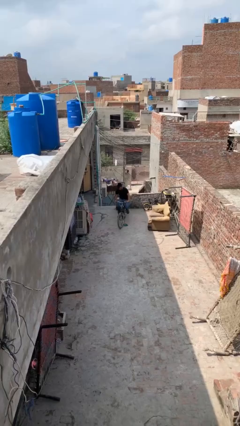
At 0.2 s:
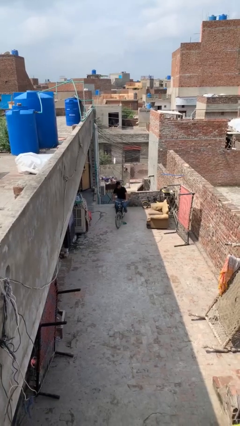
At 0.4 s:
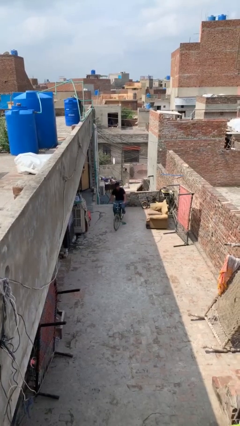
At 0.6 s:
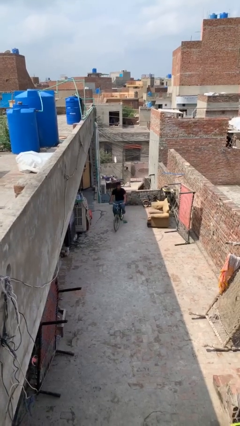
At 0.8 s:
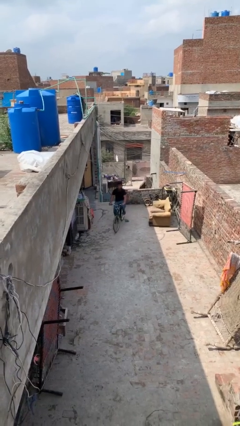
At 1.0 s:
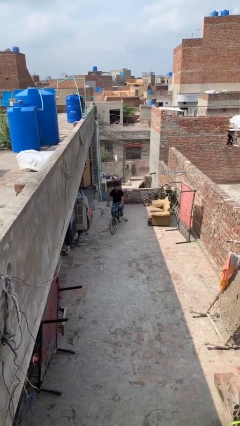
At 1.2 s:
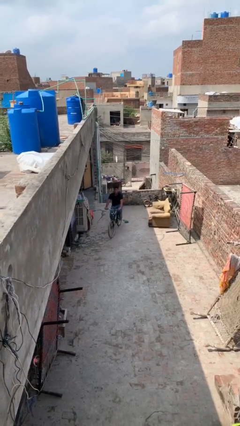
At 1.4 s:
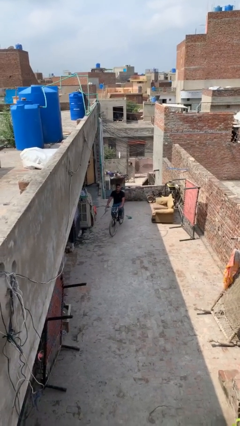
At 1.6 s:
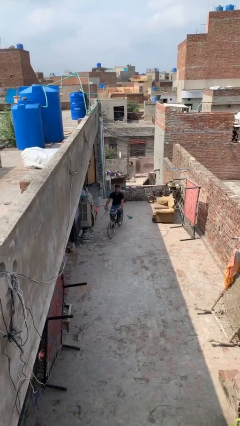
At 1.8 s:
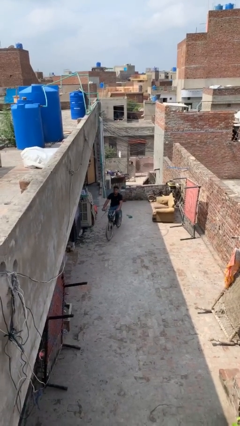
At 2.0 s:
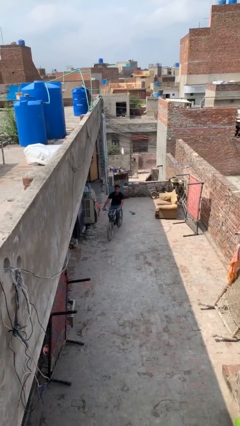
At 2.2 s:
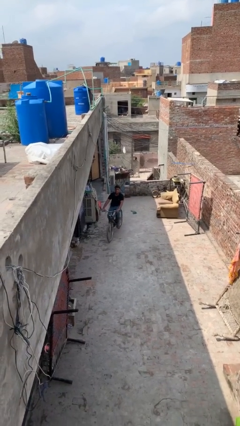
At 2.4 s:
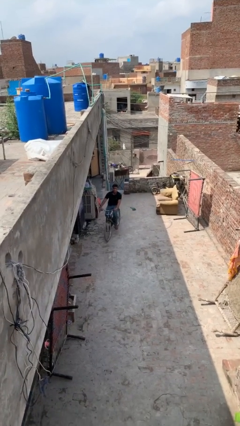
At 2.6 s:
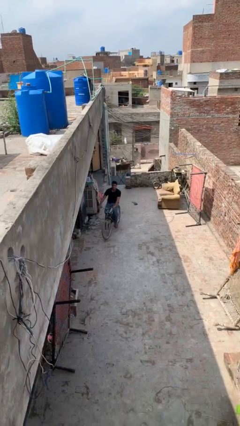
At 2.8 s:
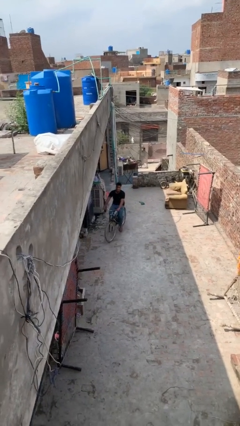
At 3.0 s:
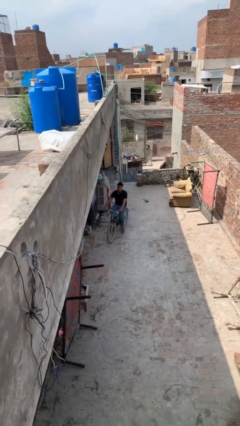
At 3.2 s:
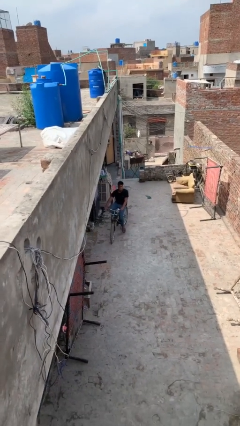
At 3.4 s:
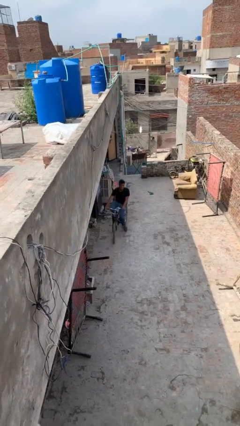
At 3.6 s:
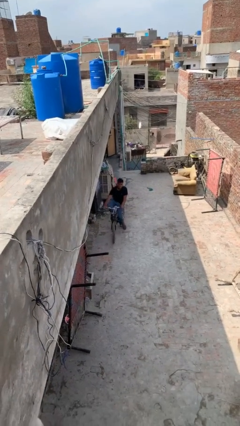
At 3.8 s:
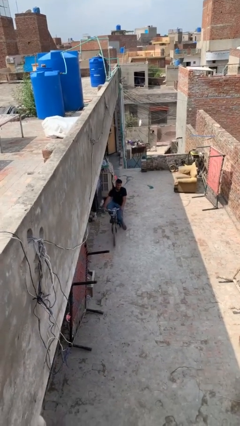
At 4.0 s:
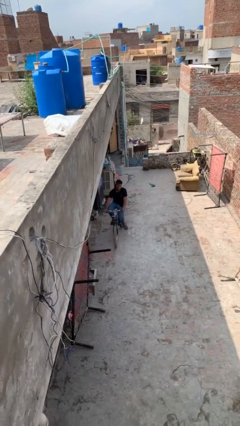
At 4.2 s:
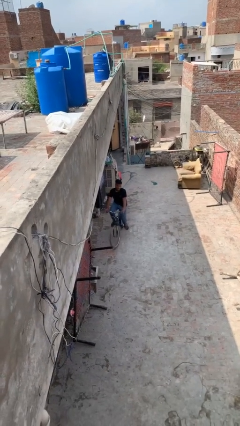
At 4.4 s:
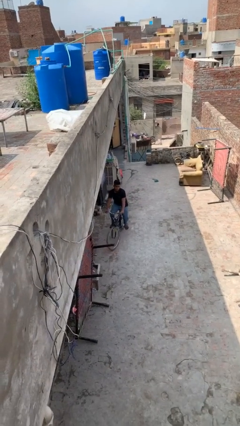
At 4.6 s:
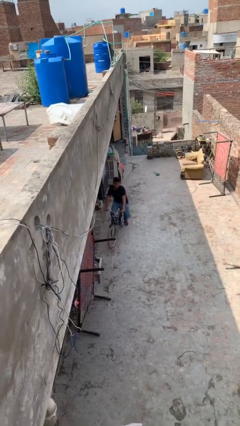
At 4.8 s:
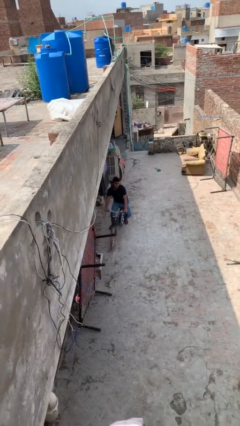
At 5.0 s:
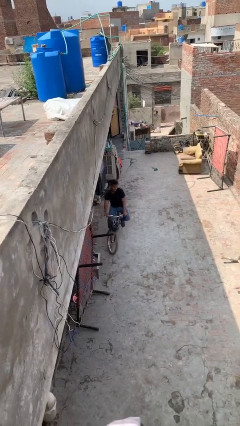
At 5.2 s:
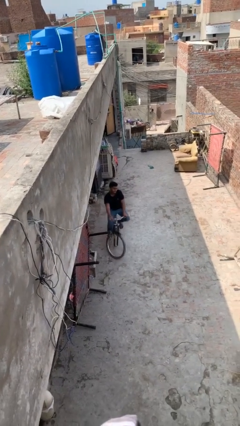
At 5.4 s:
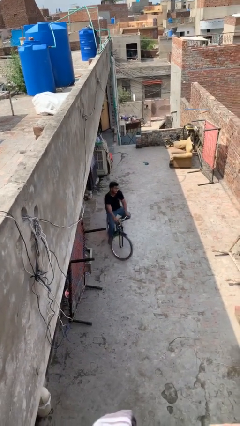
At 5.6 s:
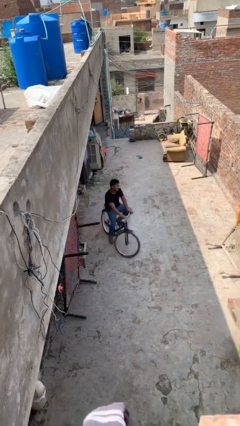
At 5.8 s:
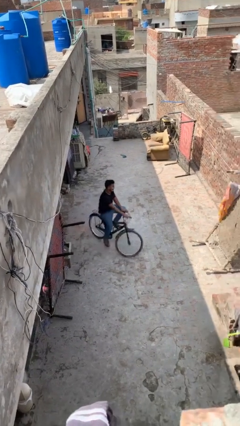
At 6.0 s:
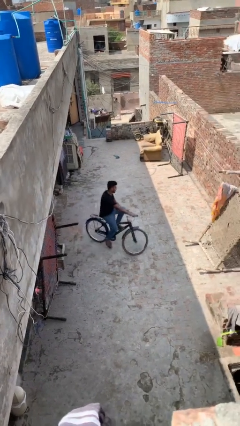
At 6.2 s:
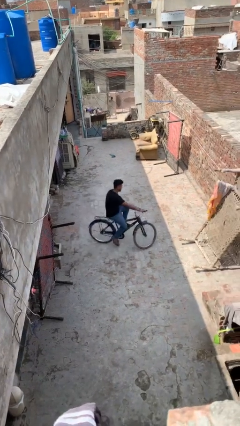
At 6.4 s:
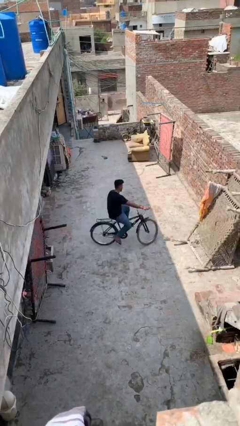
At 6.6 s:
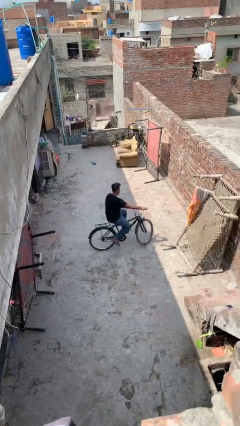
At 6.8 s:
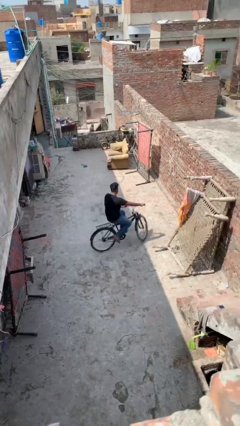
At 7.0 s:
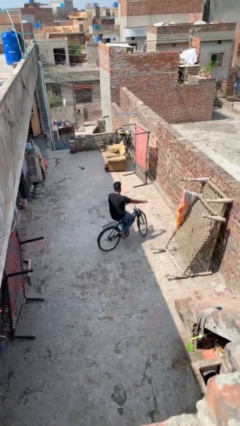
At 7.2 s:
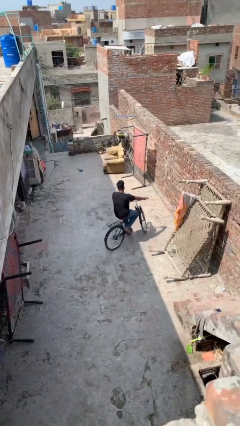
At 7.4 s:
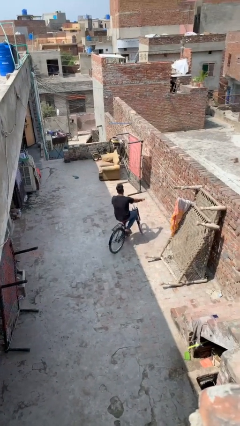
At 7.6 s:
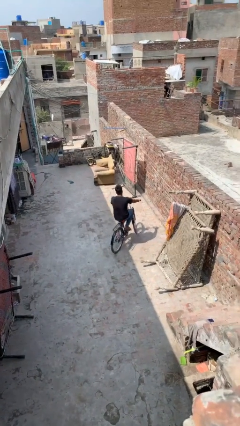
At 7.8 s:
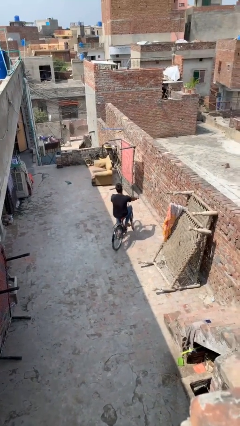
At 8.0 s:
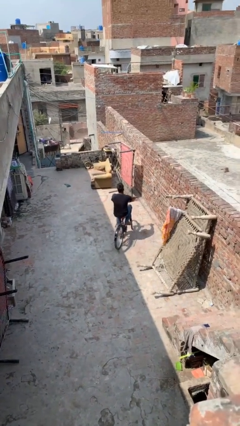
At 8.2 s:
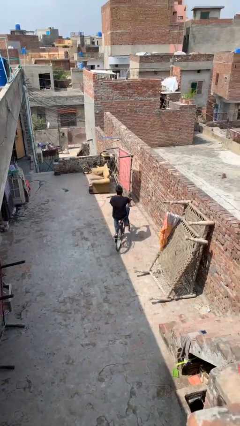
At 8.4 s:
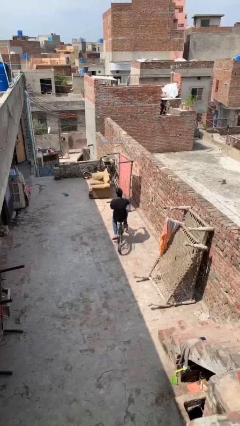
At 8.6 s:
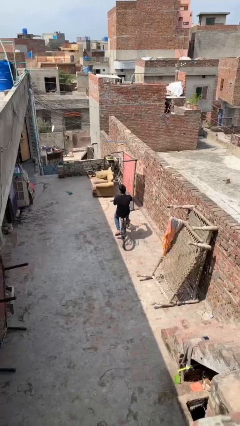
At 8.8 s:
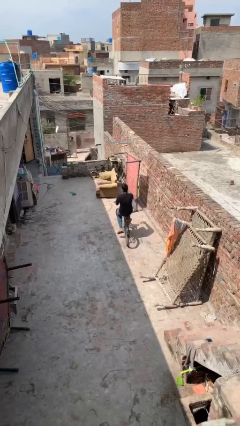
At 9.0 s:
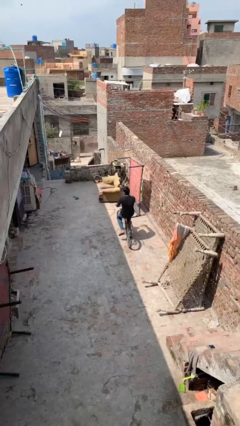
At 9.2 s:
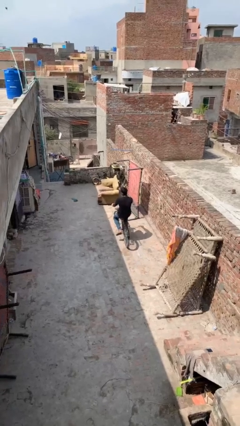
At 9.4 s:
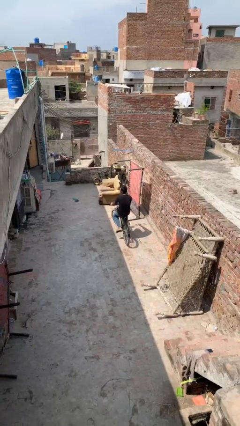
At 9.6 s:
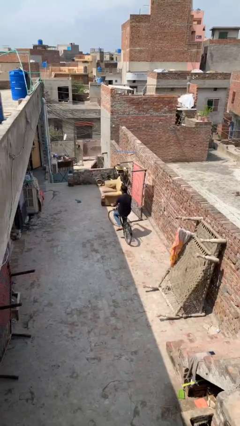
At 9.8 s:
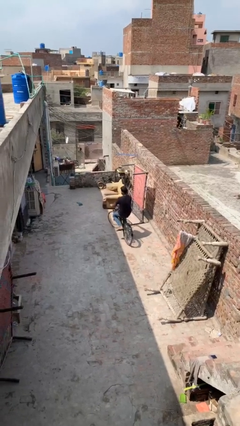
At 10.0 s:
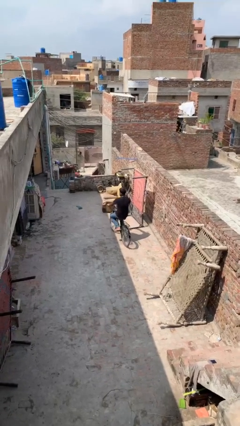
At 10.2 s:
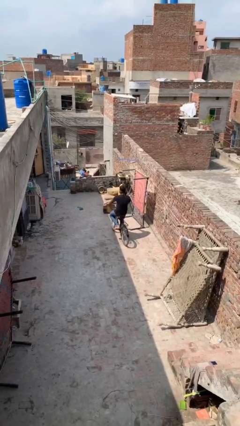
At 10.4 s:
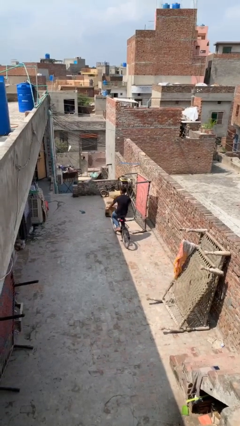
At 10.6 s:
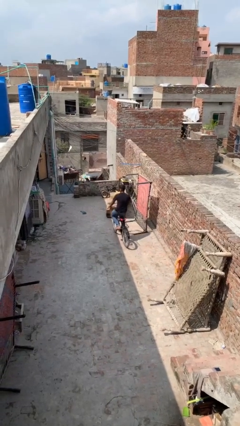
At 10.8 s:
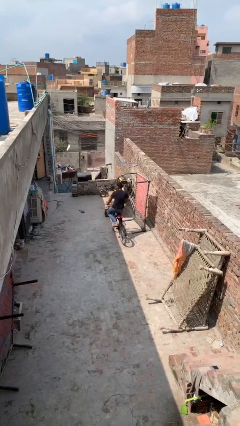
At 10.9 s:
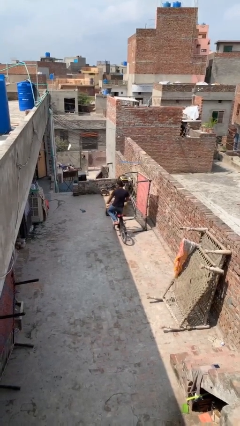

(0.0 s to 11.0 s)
person rides bicycle

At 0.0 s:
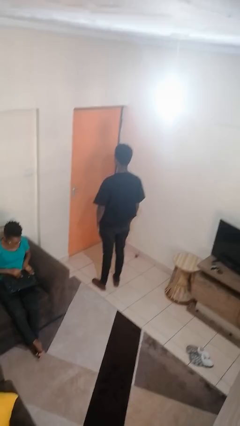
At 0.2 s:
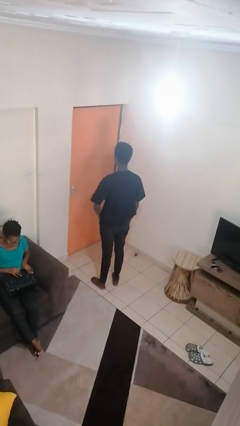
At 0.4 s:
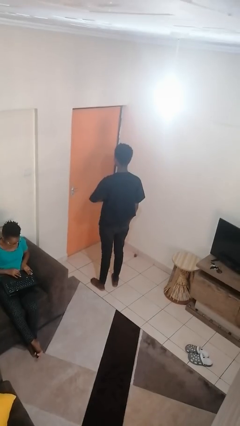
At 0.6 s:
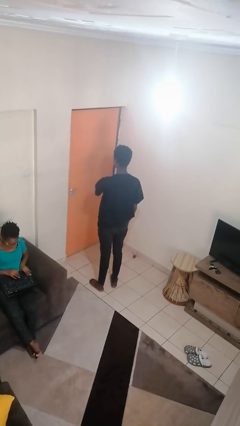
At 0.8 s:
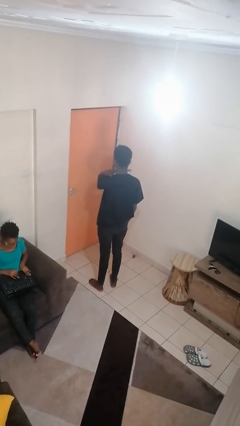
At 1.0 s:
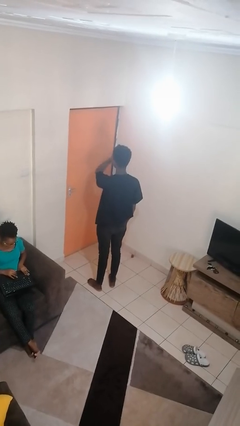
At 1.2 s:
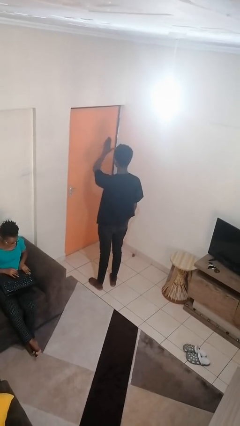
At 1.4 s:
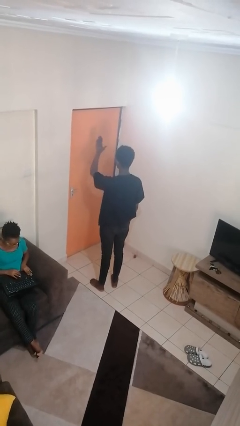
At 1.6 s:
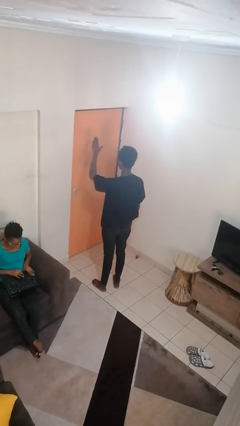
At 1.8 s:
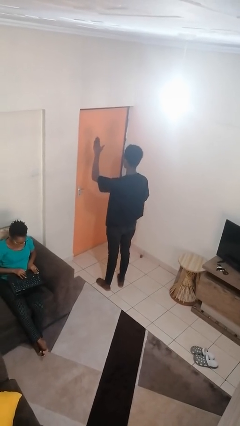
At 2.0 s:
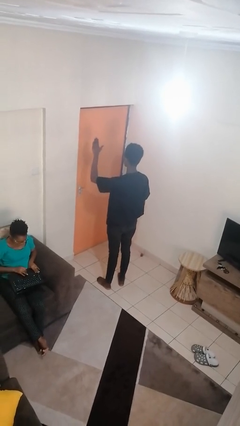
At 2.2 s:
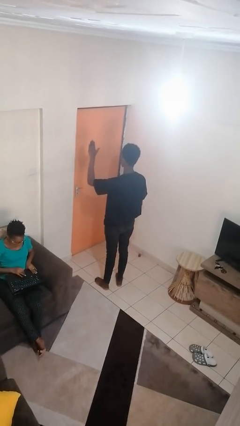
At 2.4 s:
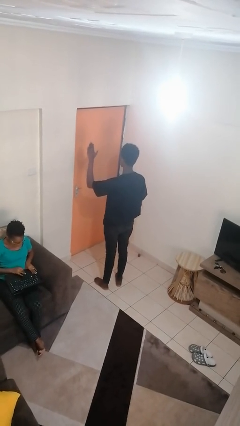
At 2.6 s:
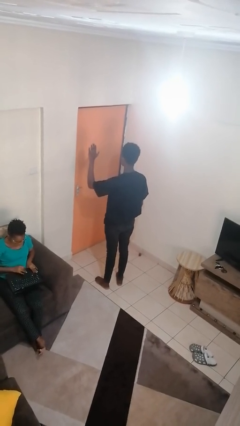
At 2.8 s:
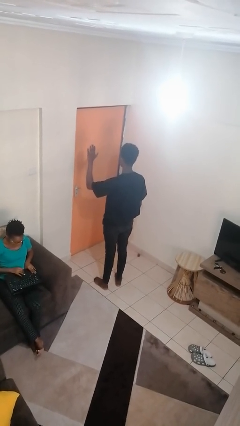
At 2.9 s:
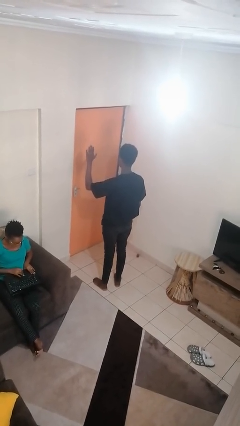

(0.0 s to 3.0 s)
person gestures swipe left

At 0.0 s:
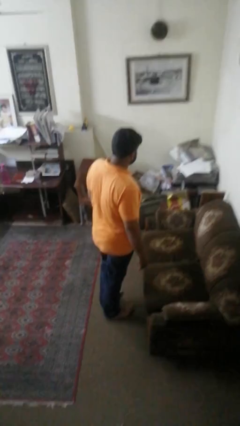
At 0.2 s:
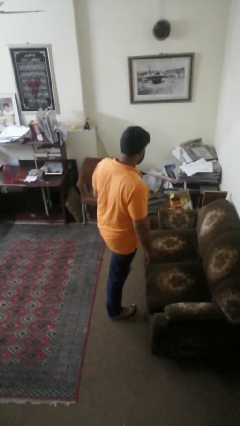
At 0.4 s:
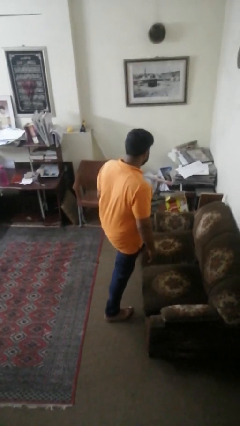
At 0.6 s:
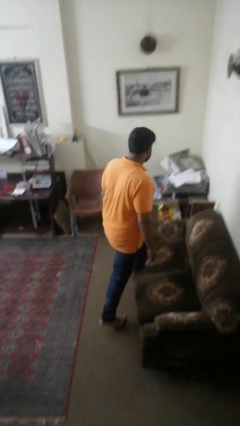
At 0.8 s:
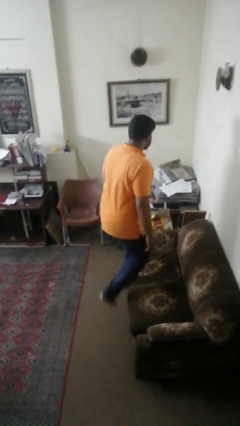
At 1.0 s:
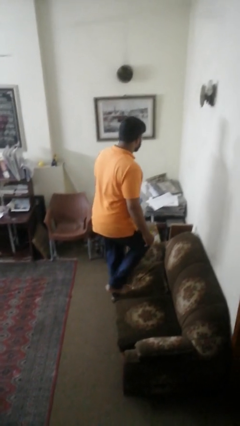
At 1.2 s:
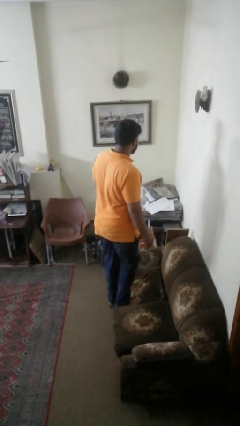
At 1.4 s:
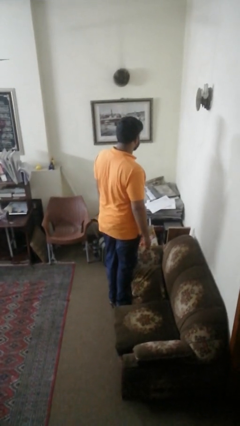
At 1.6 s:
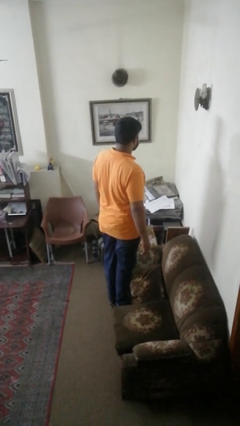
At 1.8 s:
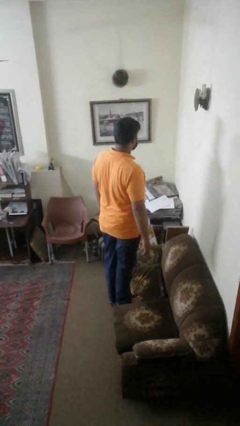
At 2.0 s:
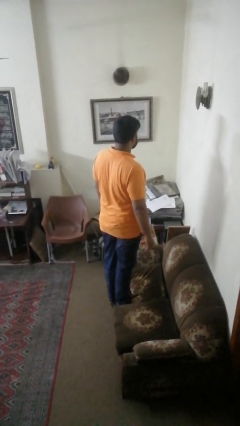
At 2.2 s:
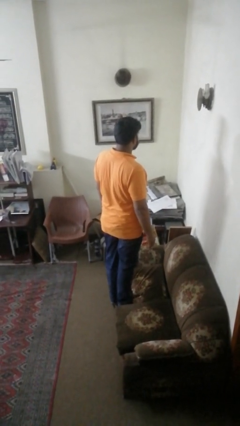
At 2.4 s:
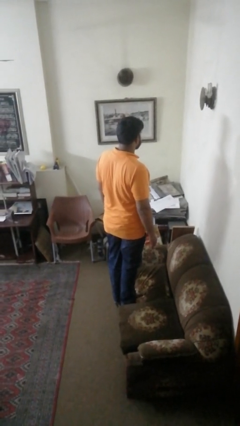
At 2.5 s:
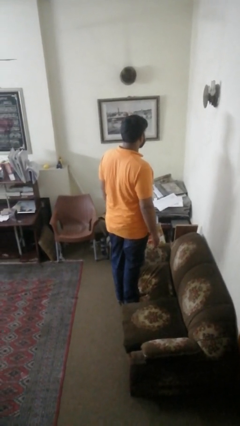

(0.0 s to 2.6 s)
person climbs on couch

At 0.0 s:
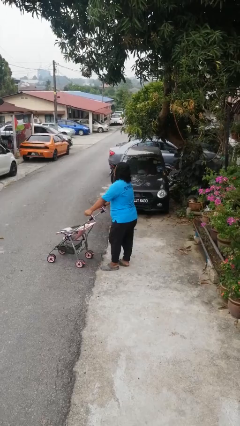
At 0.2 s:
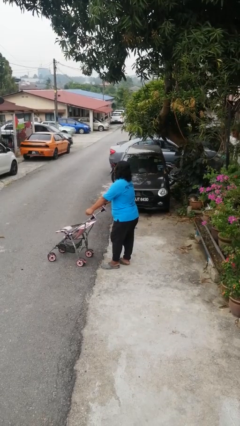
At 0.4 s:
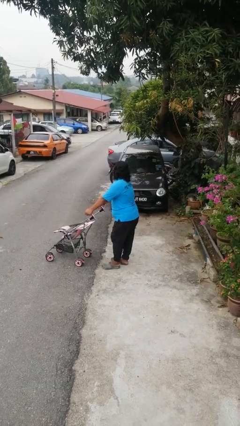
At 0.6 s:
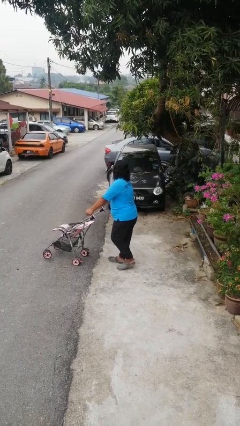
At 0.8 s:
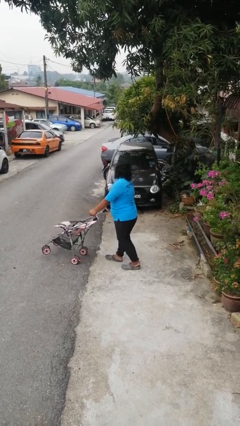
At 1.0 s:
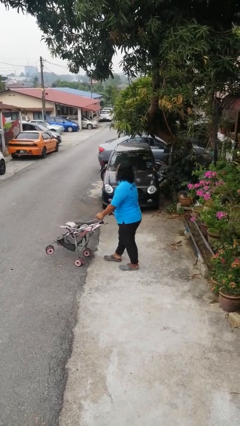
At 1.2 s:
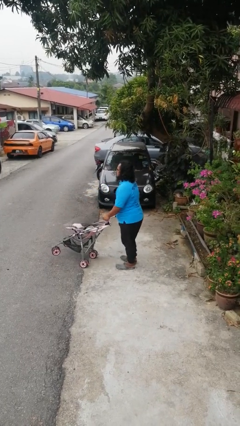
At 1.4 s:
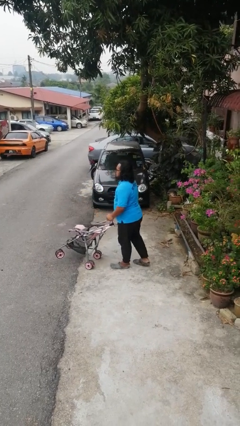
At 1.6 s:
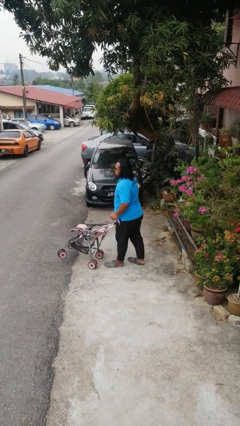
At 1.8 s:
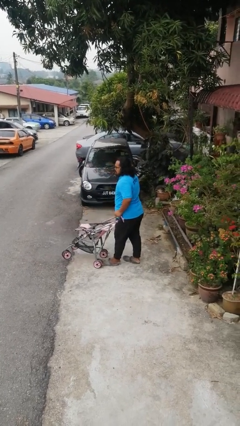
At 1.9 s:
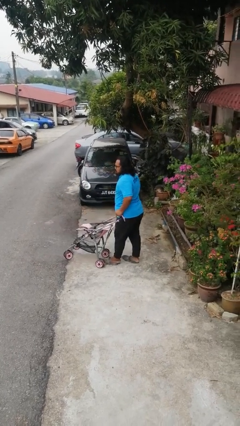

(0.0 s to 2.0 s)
person pulls wheeled cart
